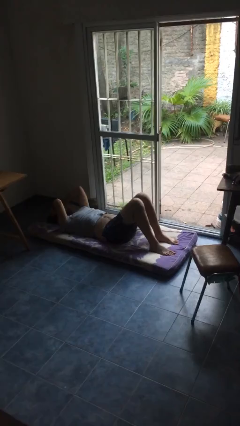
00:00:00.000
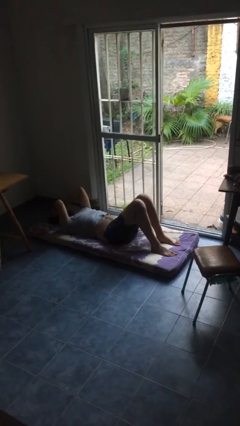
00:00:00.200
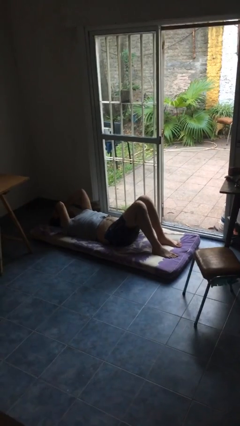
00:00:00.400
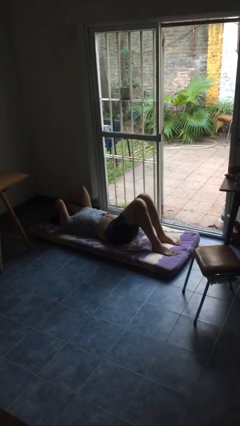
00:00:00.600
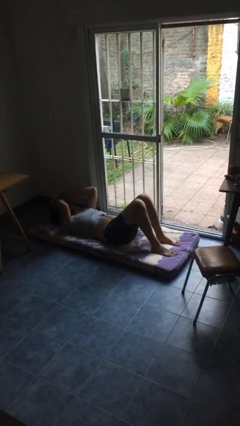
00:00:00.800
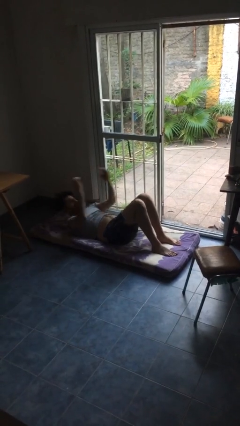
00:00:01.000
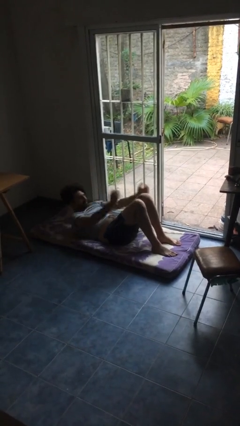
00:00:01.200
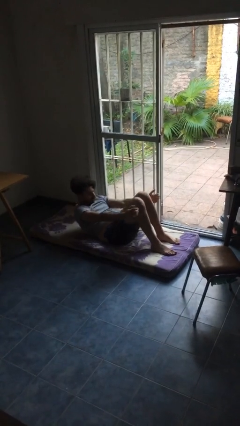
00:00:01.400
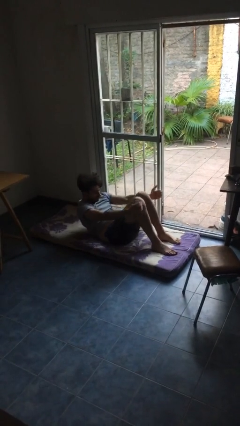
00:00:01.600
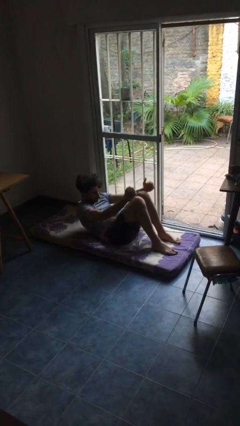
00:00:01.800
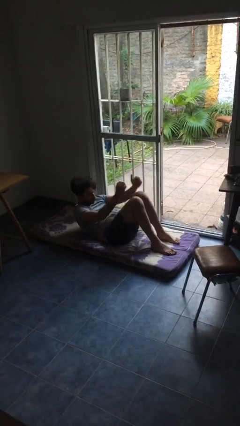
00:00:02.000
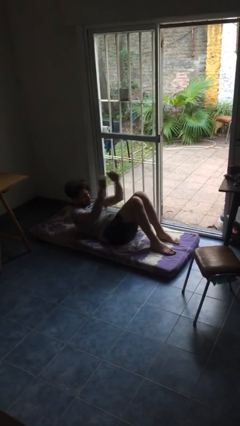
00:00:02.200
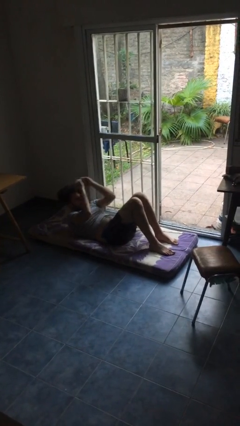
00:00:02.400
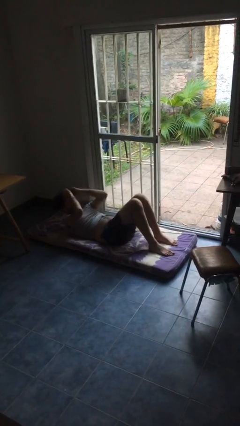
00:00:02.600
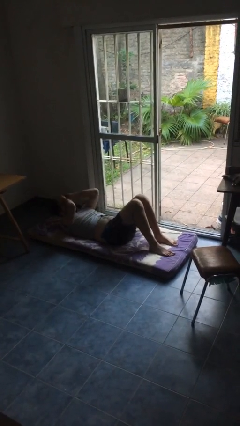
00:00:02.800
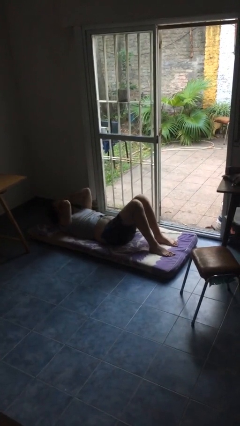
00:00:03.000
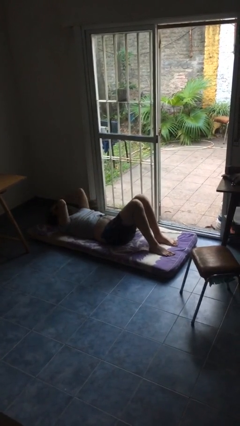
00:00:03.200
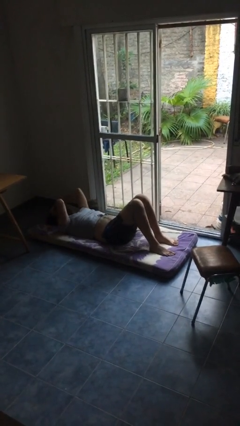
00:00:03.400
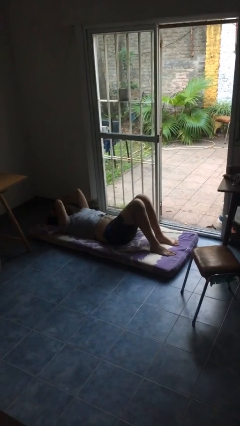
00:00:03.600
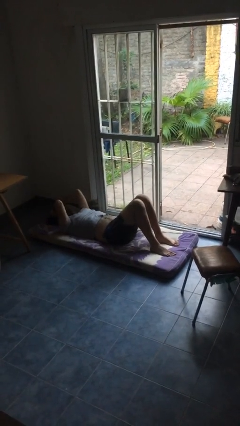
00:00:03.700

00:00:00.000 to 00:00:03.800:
person exercises with situp

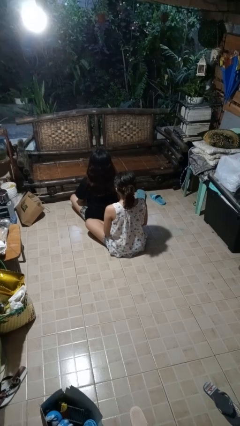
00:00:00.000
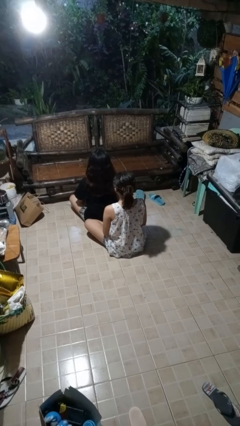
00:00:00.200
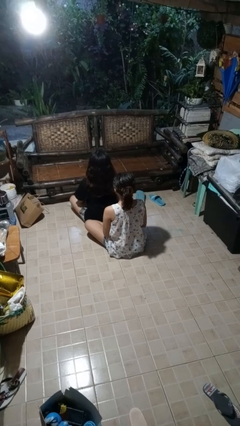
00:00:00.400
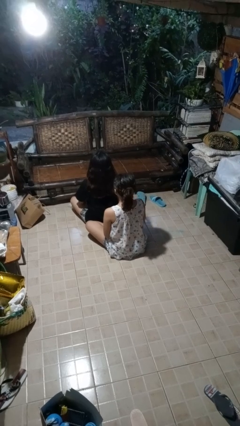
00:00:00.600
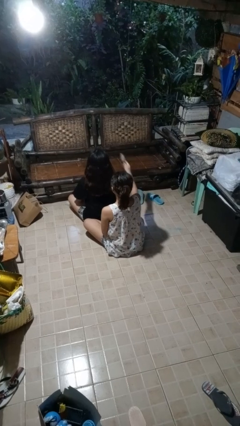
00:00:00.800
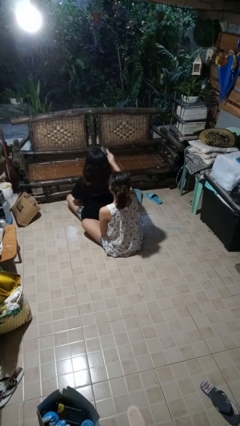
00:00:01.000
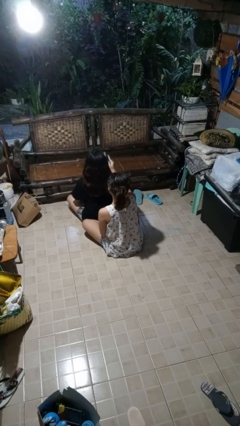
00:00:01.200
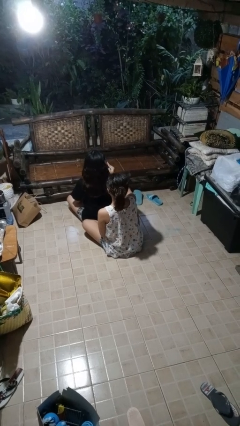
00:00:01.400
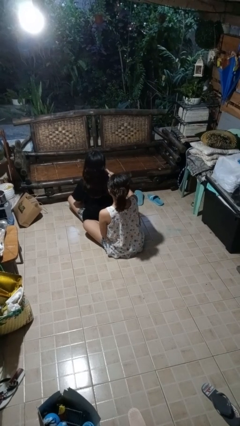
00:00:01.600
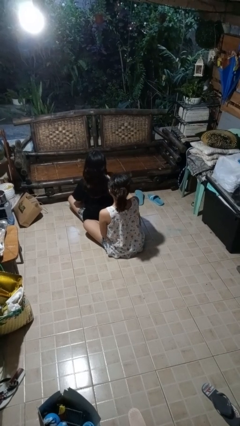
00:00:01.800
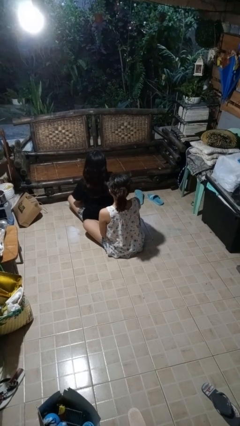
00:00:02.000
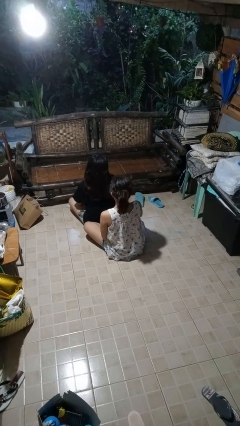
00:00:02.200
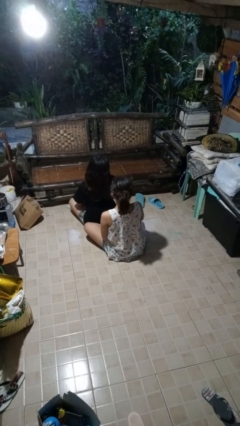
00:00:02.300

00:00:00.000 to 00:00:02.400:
person brushes hair of person

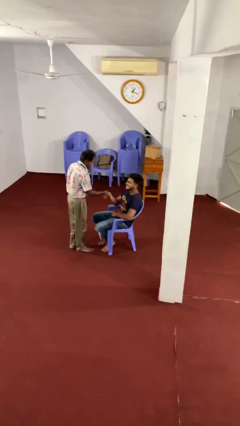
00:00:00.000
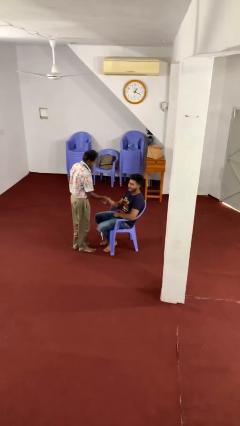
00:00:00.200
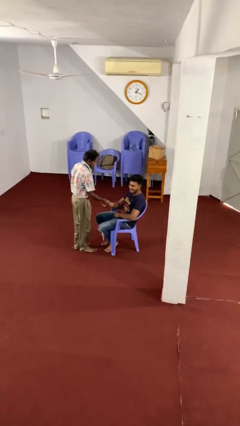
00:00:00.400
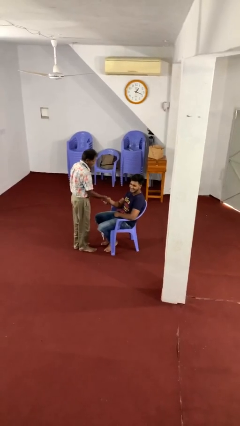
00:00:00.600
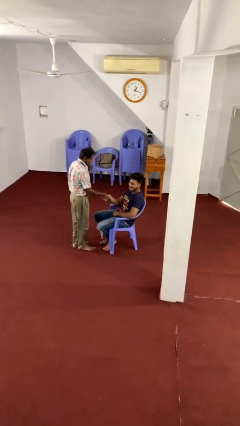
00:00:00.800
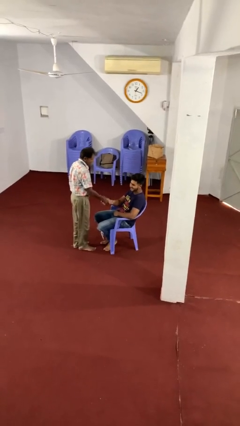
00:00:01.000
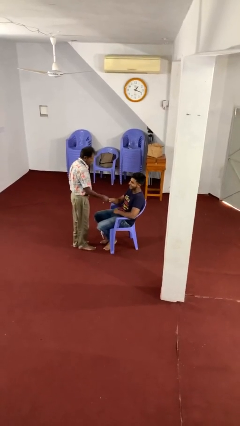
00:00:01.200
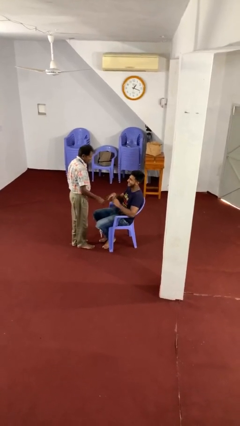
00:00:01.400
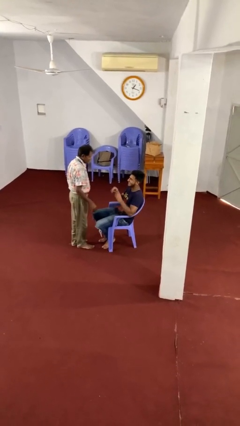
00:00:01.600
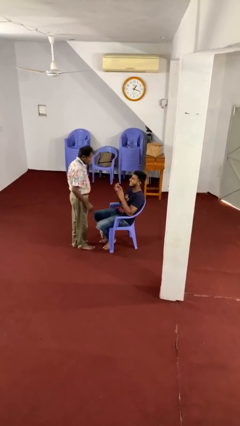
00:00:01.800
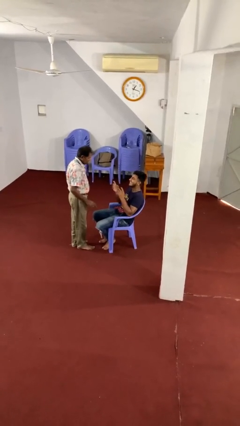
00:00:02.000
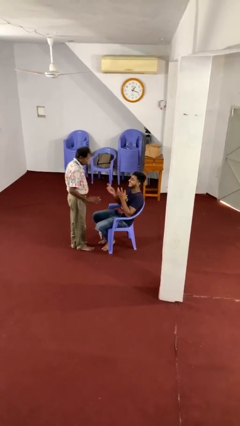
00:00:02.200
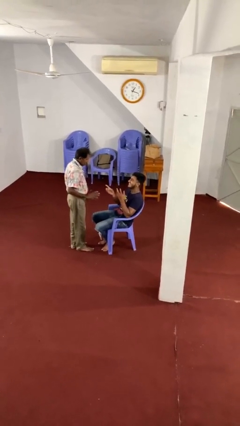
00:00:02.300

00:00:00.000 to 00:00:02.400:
person shakes hand

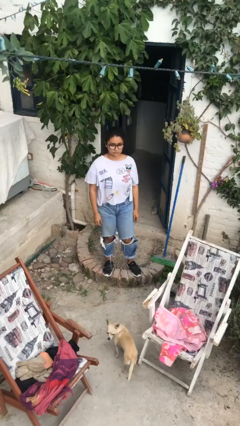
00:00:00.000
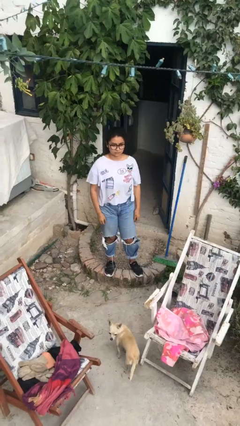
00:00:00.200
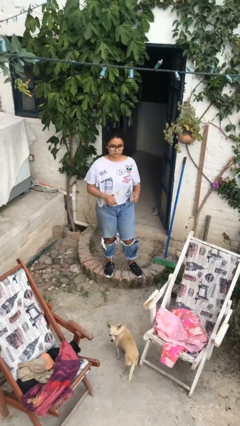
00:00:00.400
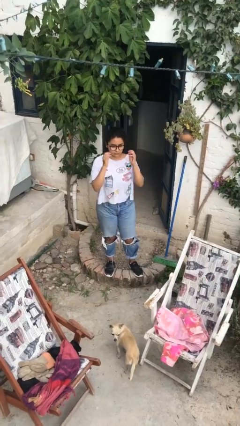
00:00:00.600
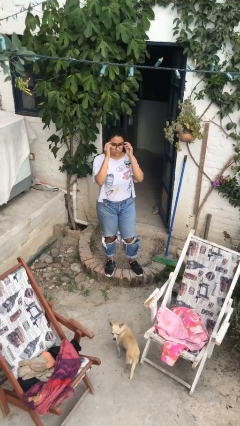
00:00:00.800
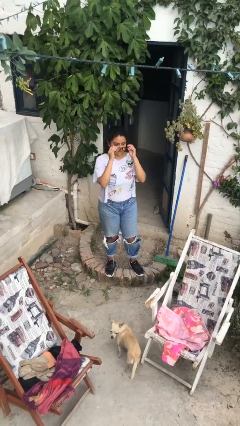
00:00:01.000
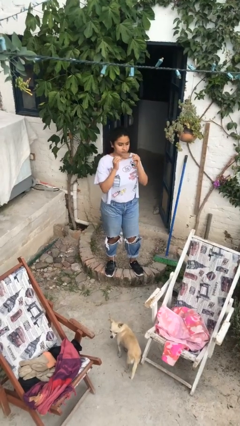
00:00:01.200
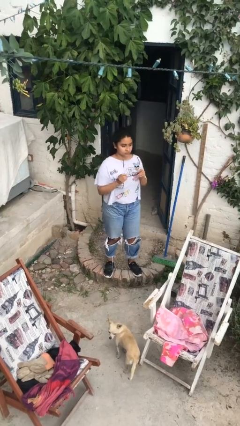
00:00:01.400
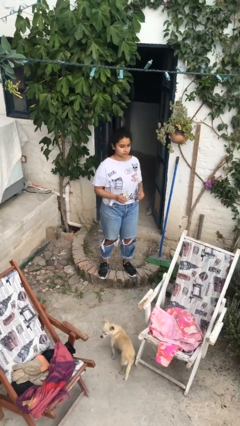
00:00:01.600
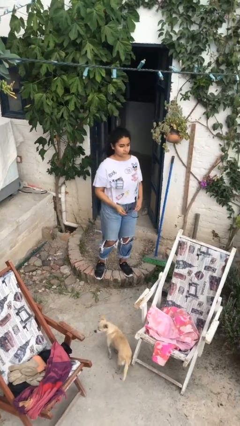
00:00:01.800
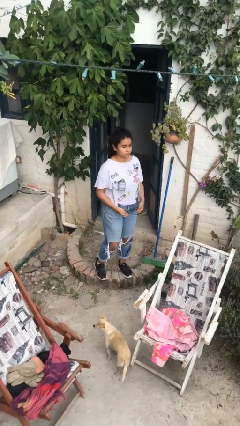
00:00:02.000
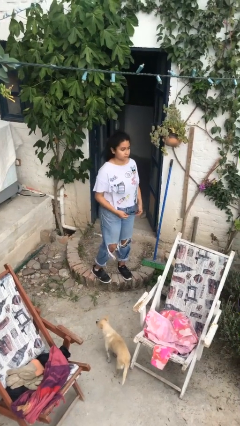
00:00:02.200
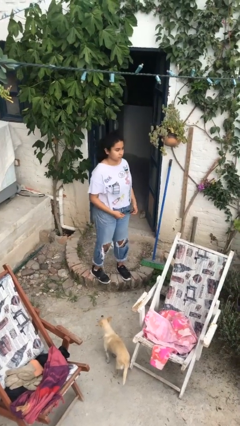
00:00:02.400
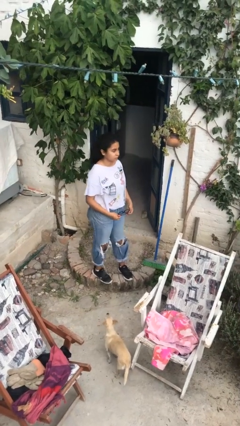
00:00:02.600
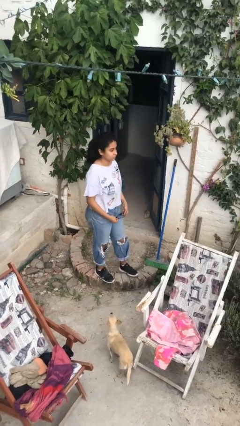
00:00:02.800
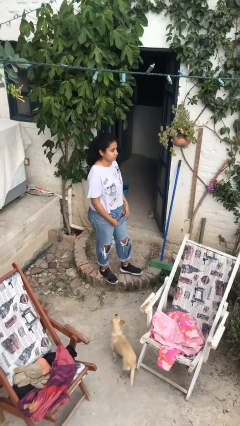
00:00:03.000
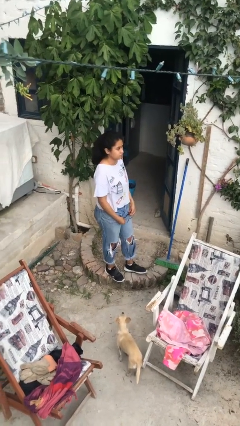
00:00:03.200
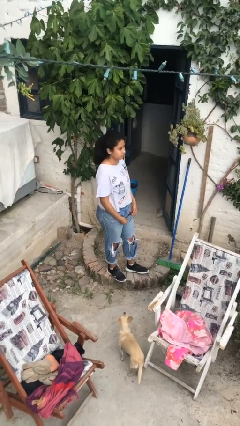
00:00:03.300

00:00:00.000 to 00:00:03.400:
person takes off glasses

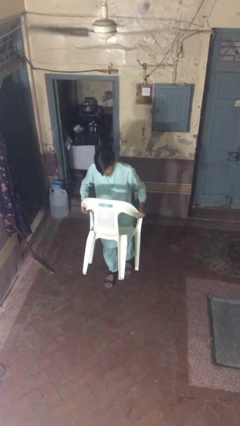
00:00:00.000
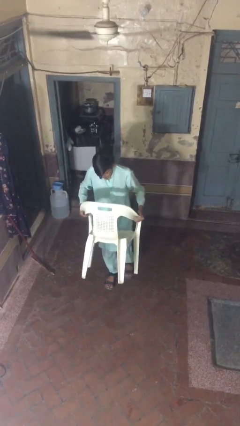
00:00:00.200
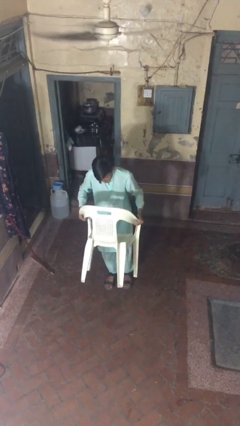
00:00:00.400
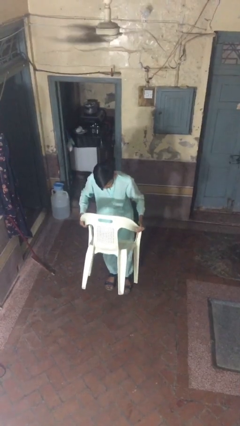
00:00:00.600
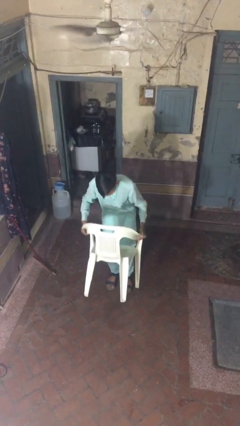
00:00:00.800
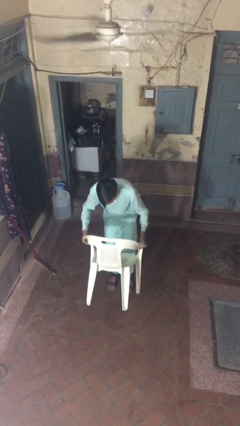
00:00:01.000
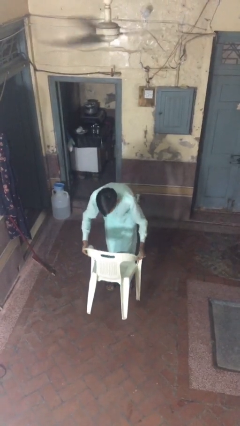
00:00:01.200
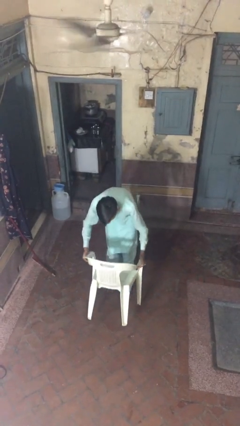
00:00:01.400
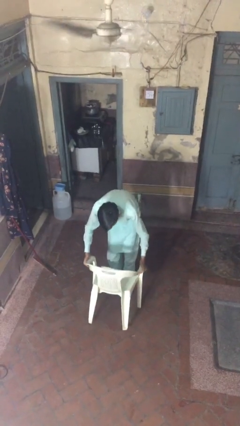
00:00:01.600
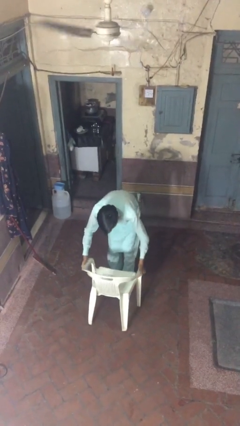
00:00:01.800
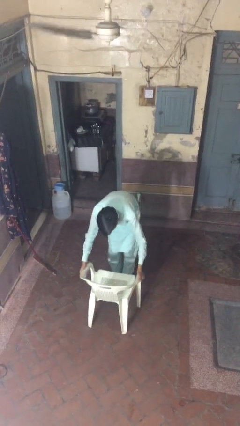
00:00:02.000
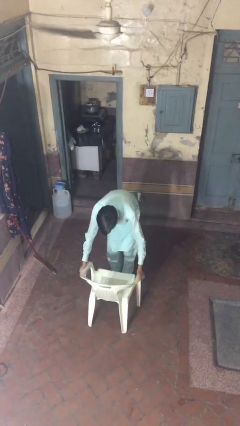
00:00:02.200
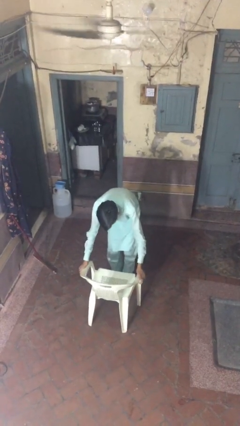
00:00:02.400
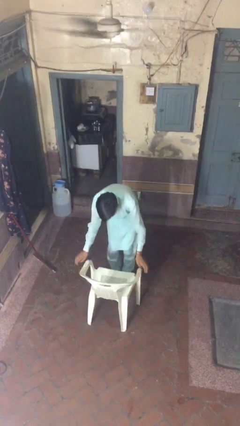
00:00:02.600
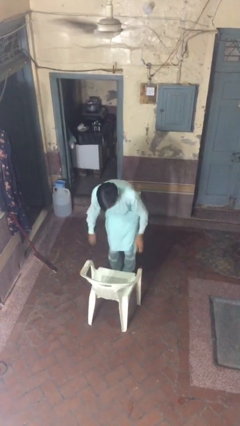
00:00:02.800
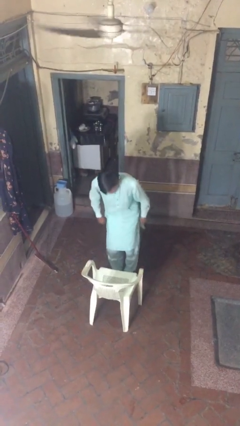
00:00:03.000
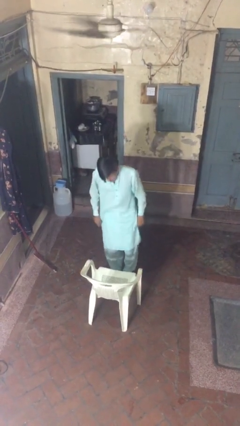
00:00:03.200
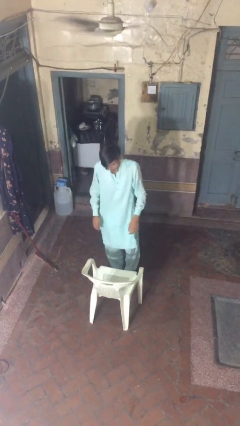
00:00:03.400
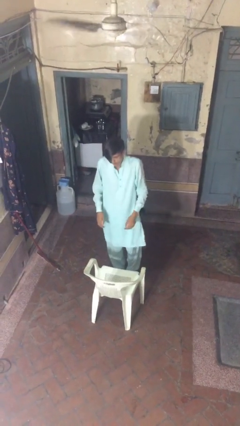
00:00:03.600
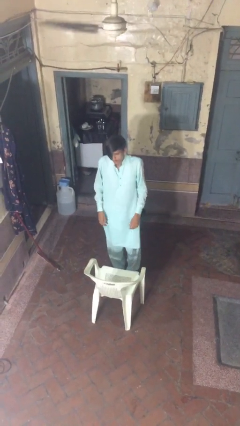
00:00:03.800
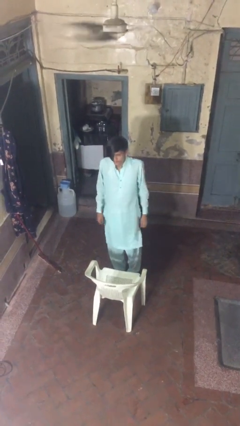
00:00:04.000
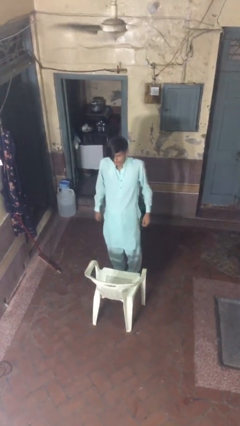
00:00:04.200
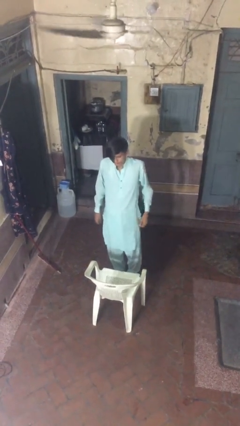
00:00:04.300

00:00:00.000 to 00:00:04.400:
person puts down object on floor

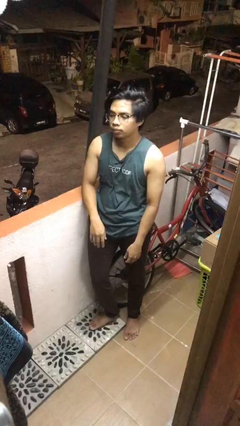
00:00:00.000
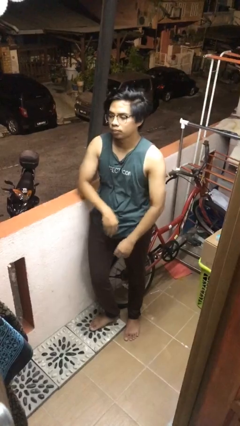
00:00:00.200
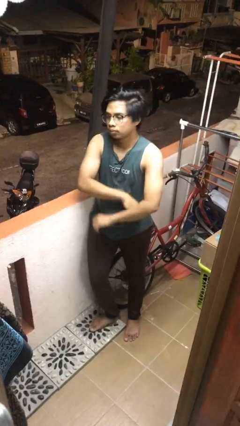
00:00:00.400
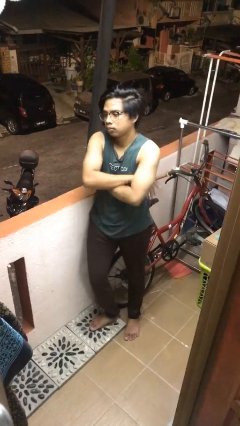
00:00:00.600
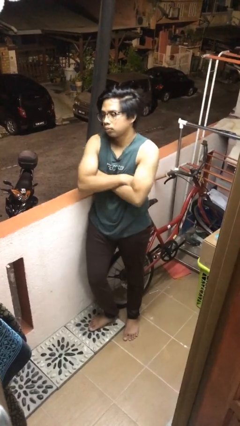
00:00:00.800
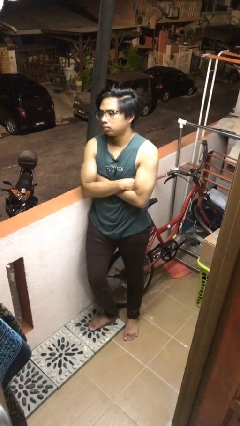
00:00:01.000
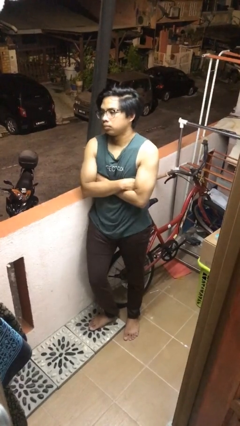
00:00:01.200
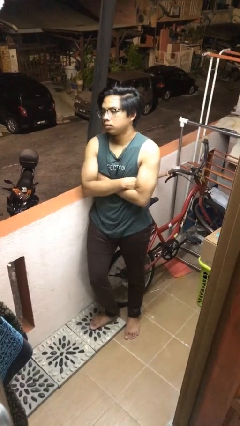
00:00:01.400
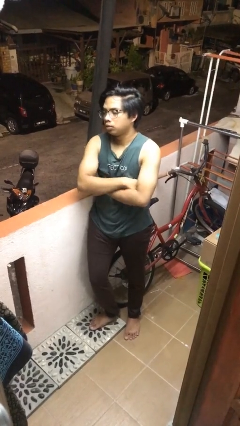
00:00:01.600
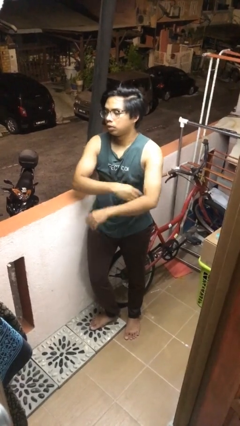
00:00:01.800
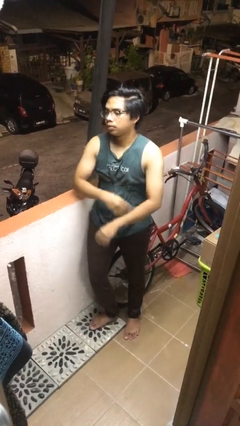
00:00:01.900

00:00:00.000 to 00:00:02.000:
person crosses arms
